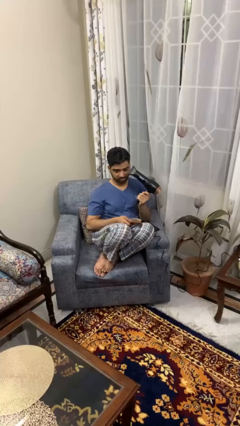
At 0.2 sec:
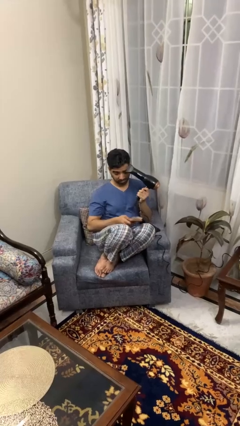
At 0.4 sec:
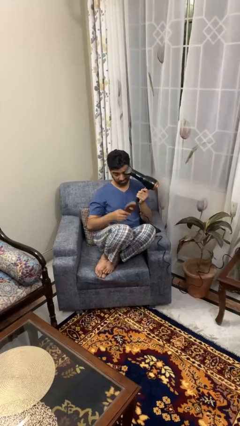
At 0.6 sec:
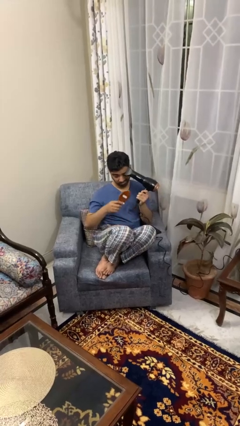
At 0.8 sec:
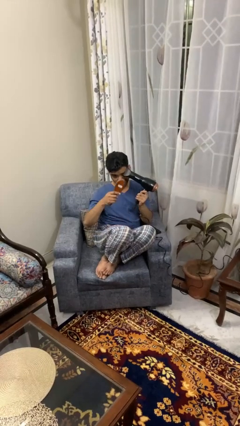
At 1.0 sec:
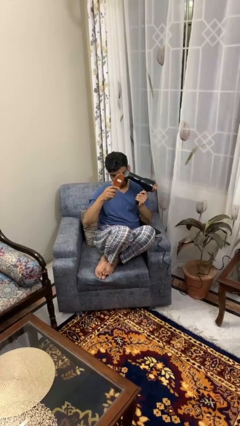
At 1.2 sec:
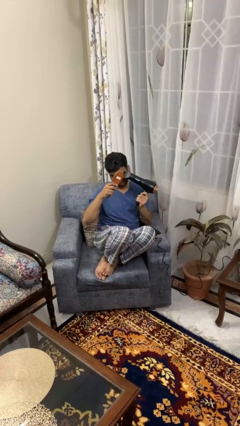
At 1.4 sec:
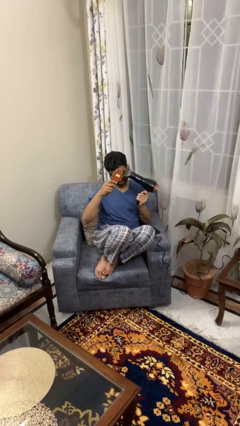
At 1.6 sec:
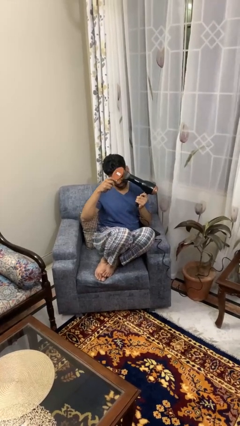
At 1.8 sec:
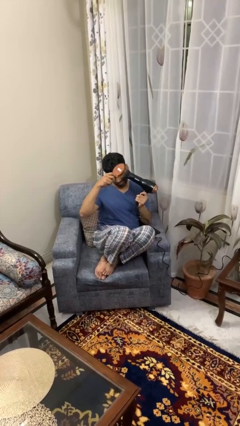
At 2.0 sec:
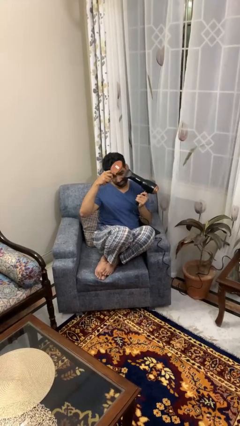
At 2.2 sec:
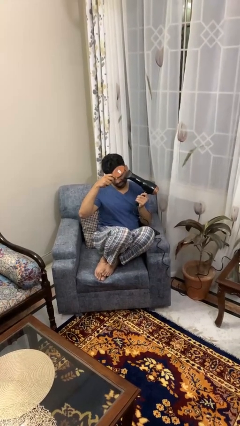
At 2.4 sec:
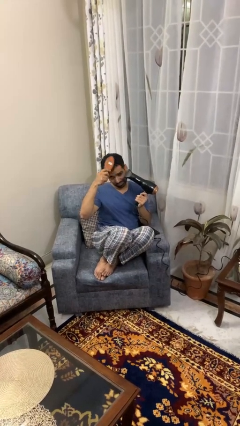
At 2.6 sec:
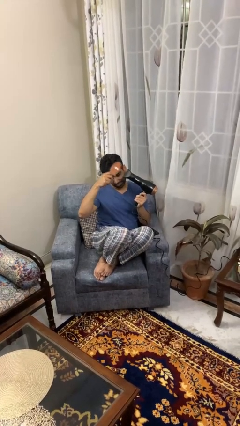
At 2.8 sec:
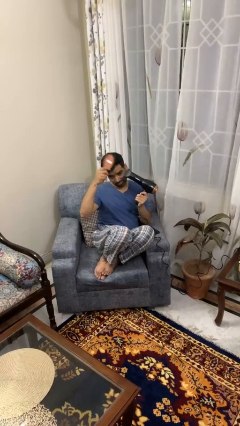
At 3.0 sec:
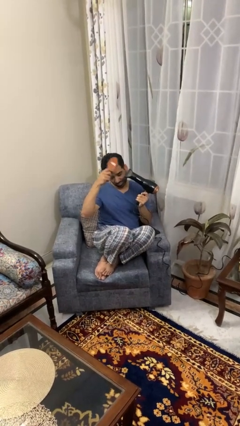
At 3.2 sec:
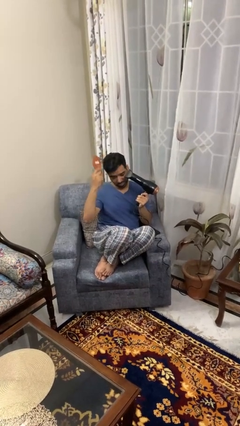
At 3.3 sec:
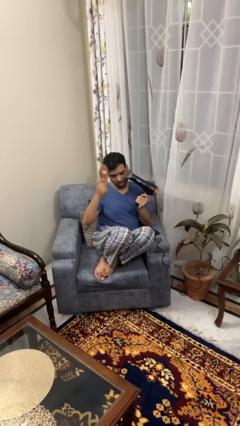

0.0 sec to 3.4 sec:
person dries hair with hairdryer

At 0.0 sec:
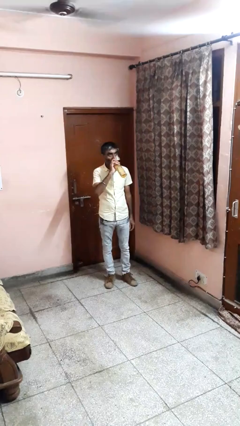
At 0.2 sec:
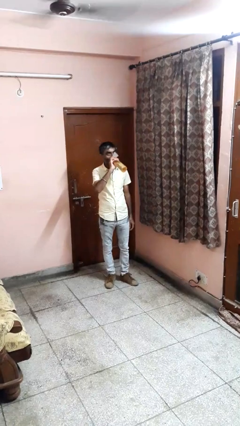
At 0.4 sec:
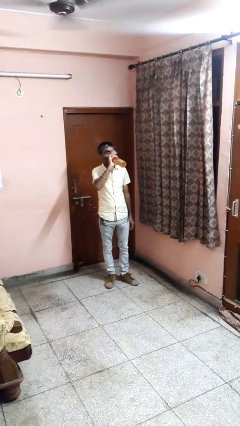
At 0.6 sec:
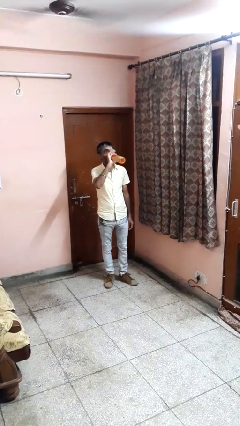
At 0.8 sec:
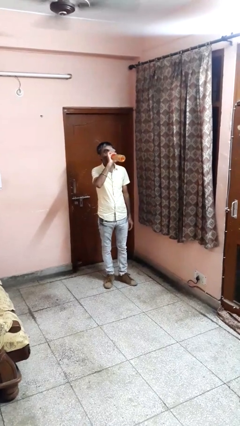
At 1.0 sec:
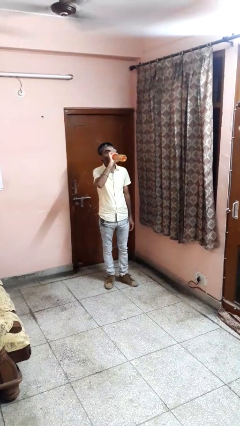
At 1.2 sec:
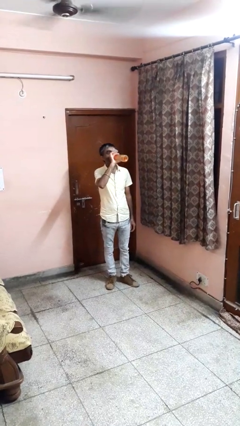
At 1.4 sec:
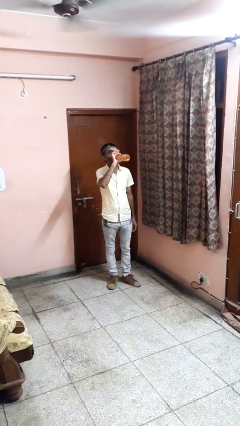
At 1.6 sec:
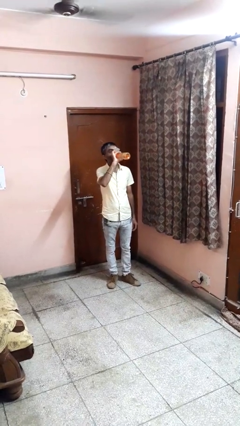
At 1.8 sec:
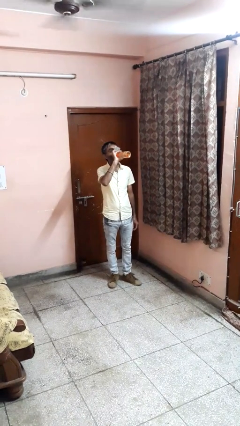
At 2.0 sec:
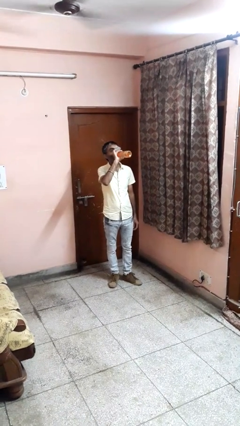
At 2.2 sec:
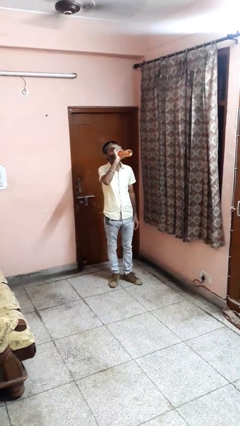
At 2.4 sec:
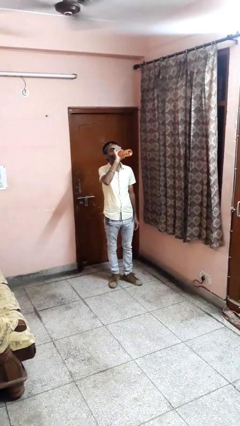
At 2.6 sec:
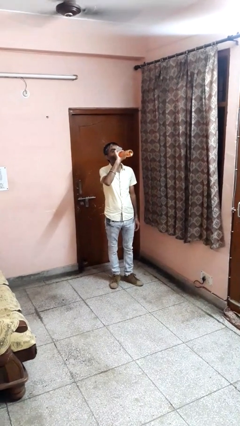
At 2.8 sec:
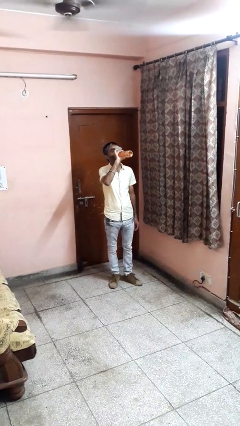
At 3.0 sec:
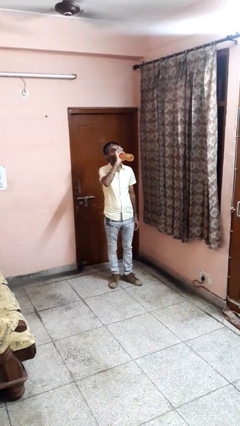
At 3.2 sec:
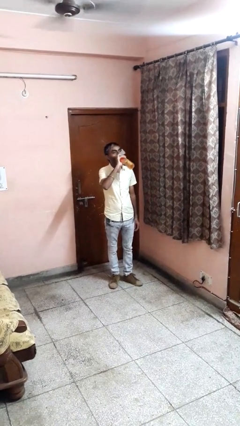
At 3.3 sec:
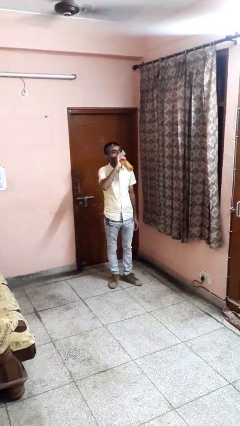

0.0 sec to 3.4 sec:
person drinks from bottle

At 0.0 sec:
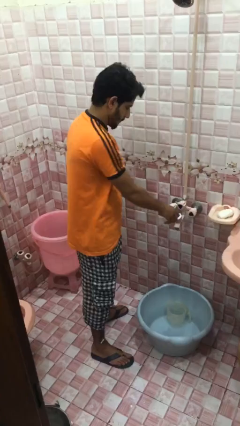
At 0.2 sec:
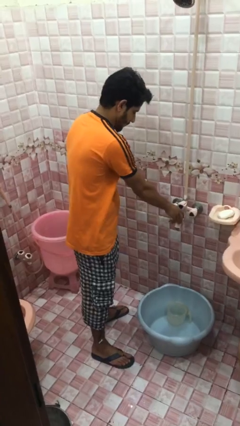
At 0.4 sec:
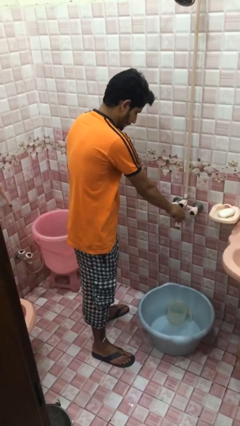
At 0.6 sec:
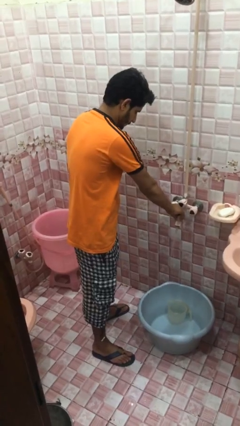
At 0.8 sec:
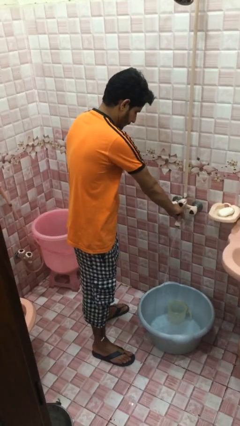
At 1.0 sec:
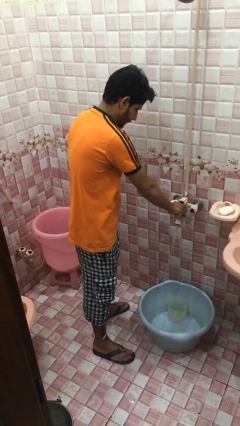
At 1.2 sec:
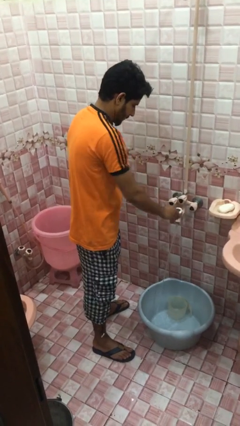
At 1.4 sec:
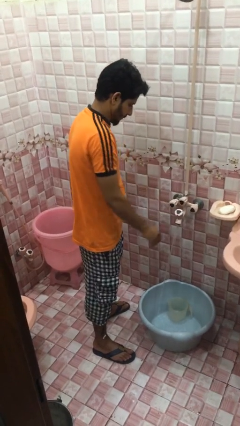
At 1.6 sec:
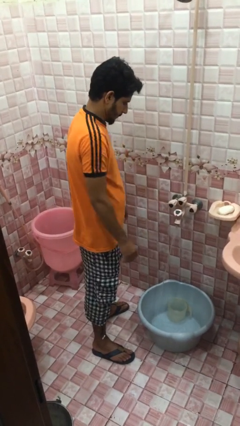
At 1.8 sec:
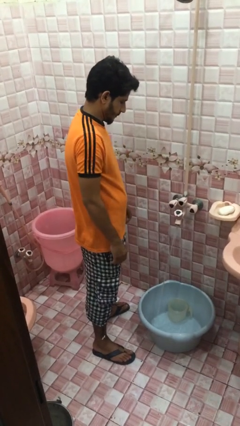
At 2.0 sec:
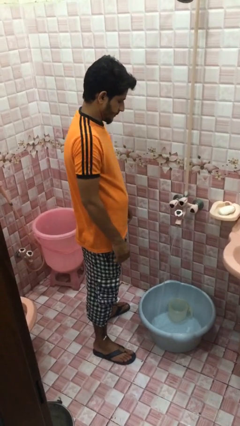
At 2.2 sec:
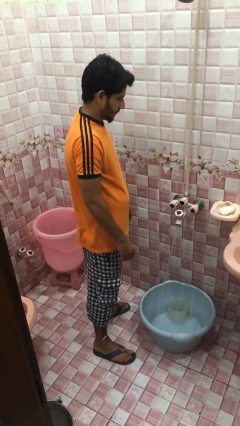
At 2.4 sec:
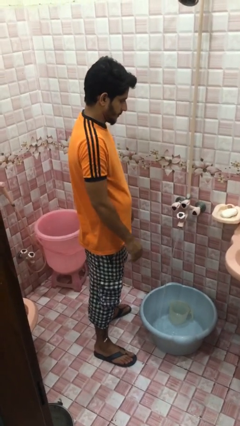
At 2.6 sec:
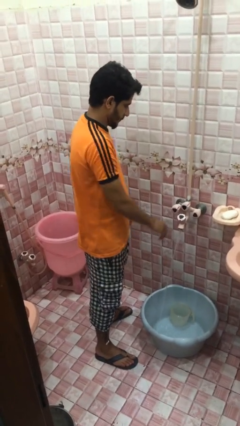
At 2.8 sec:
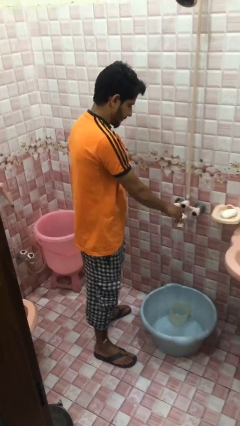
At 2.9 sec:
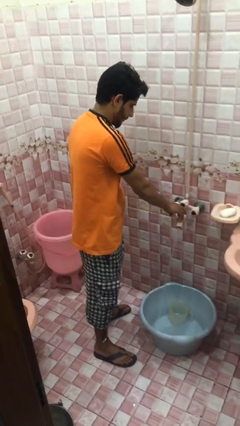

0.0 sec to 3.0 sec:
person turns on faucet

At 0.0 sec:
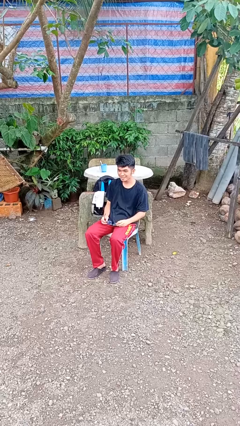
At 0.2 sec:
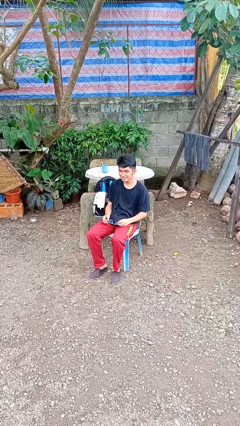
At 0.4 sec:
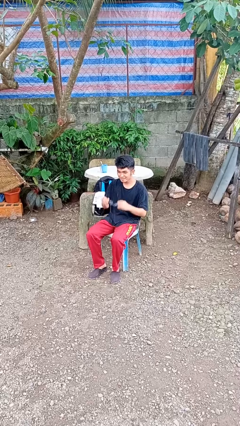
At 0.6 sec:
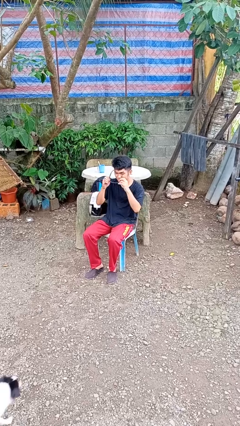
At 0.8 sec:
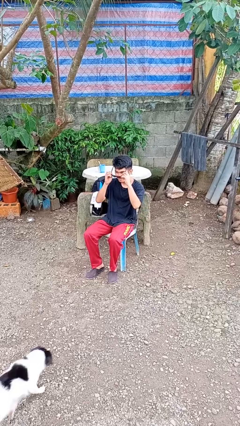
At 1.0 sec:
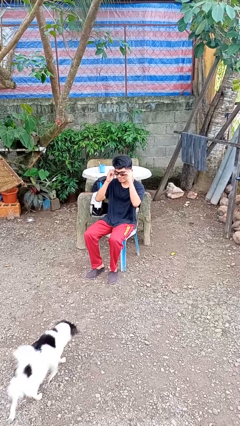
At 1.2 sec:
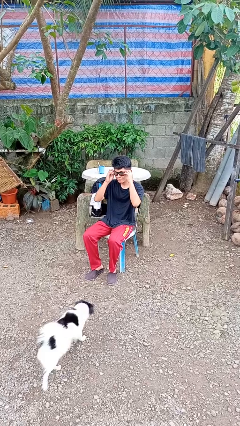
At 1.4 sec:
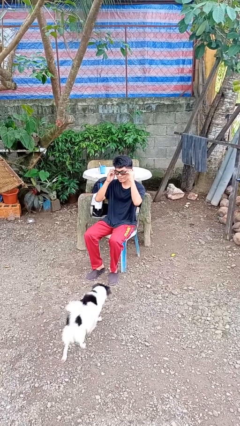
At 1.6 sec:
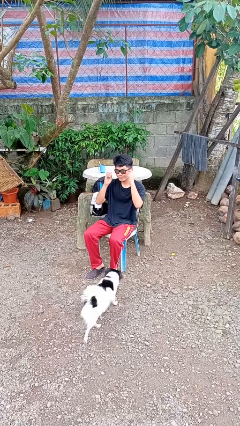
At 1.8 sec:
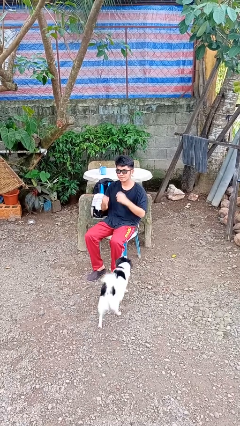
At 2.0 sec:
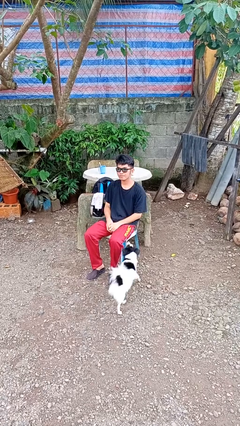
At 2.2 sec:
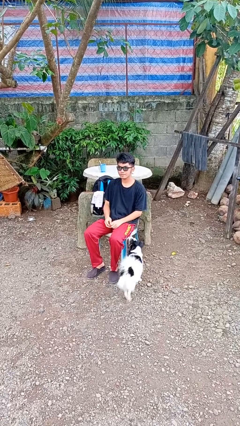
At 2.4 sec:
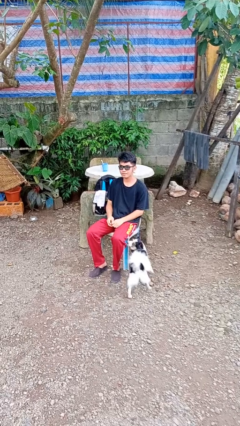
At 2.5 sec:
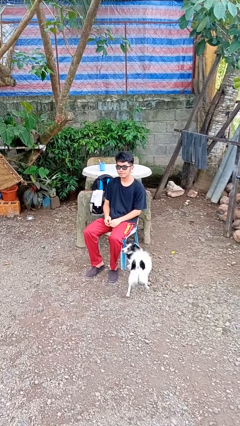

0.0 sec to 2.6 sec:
person puts on sunglasses

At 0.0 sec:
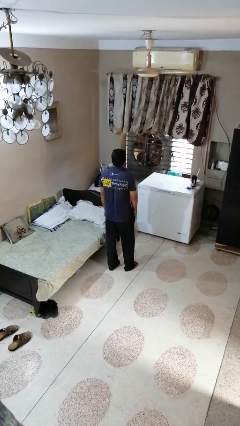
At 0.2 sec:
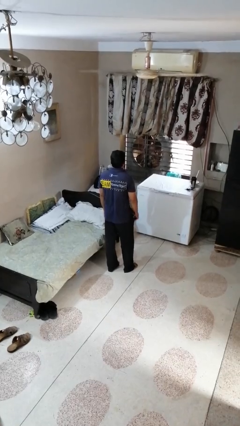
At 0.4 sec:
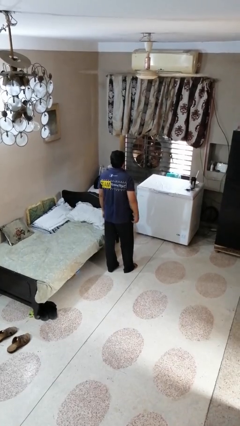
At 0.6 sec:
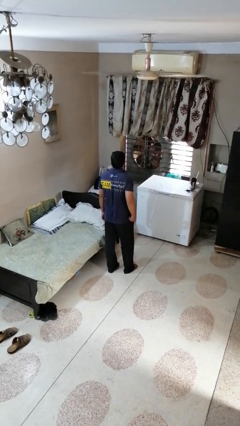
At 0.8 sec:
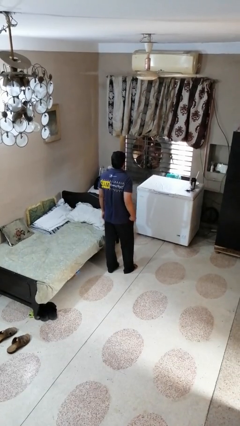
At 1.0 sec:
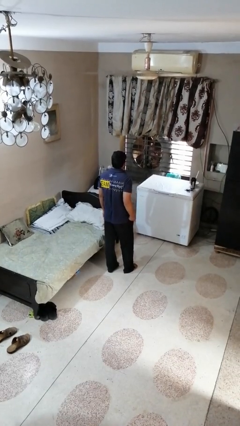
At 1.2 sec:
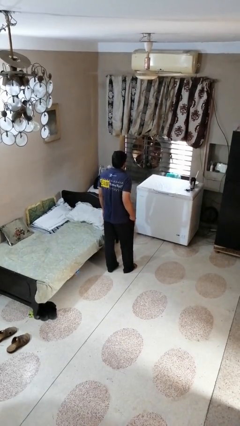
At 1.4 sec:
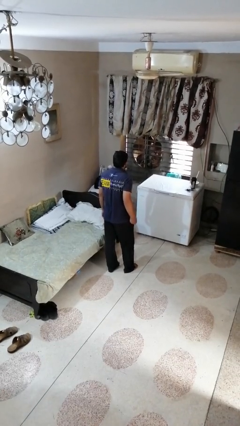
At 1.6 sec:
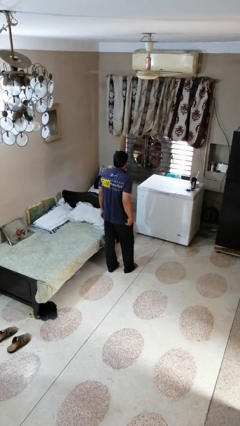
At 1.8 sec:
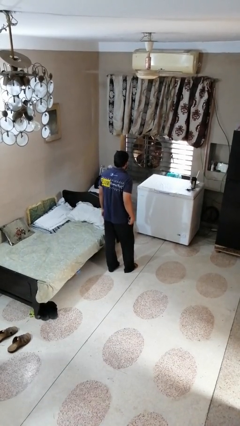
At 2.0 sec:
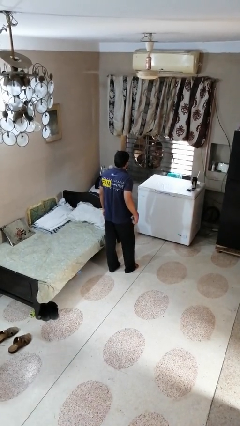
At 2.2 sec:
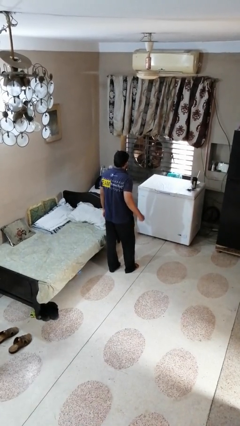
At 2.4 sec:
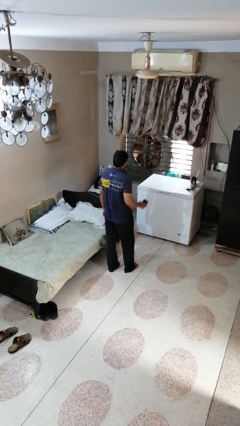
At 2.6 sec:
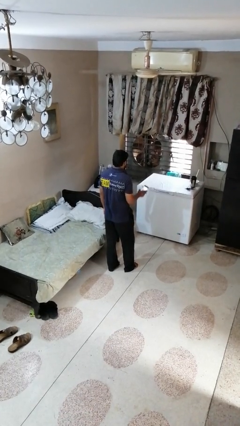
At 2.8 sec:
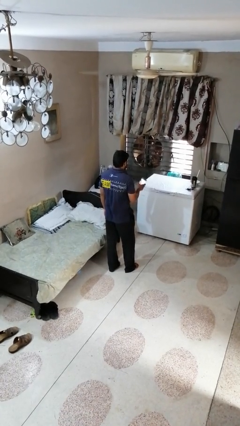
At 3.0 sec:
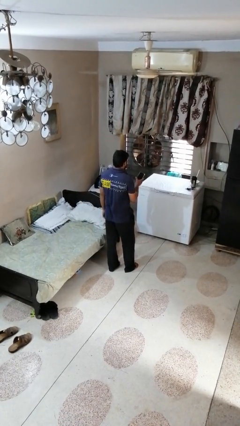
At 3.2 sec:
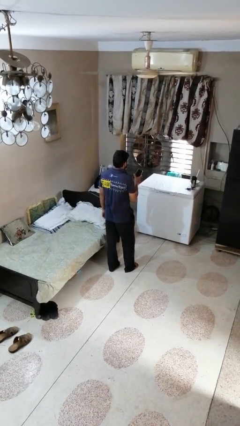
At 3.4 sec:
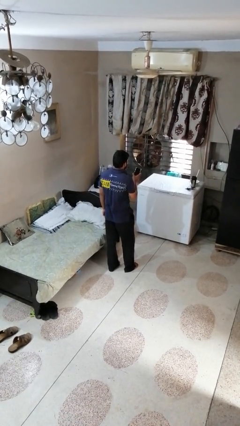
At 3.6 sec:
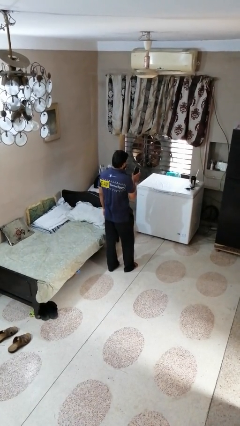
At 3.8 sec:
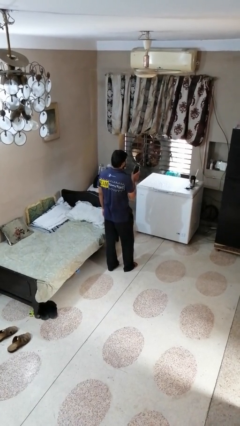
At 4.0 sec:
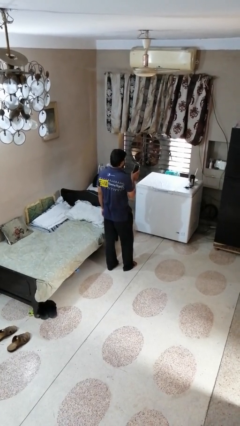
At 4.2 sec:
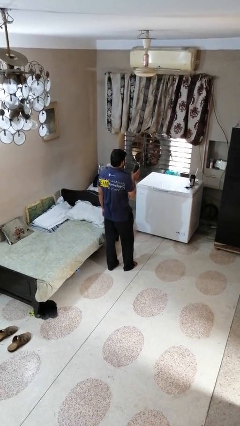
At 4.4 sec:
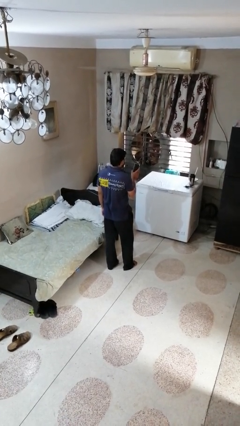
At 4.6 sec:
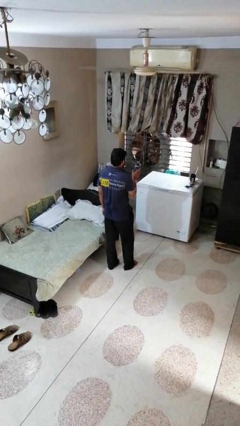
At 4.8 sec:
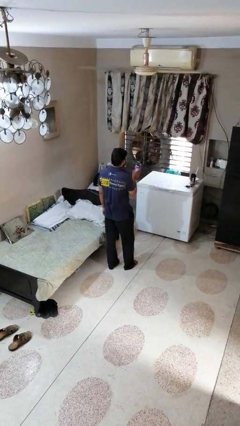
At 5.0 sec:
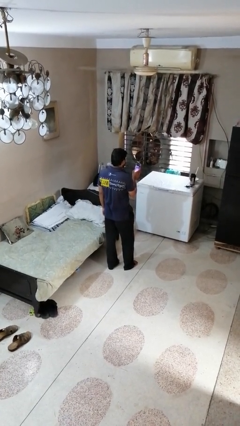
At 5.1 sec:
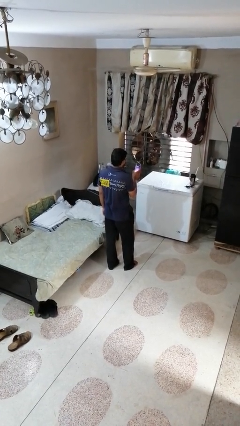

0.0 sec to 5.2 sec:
person takes phone from pocket
